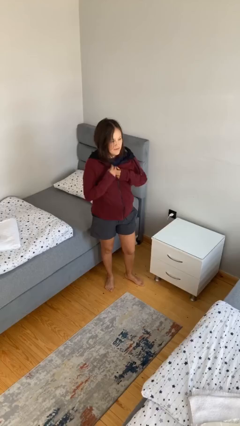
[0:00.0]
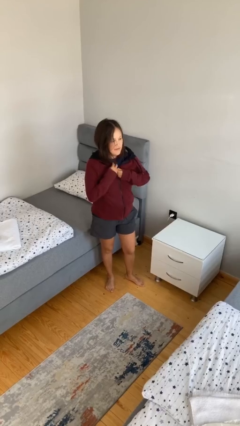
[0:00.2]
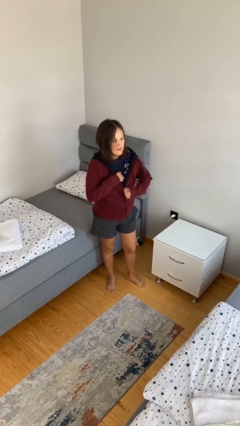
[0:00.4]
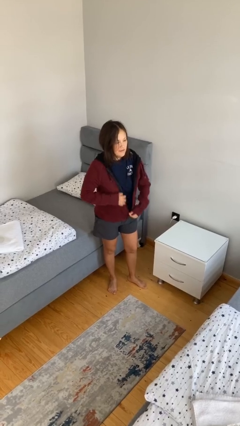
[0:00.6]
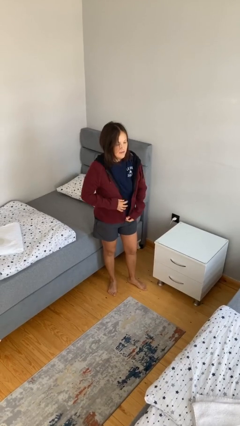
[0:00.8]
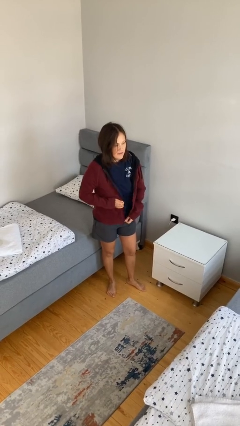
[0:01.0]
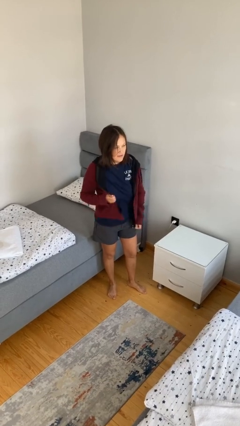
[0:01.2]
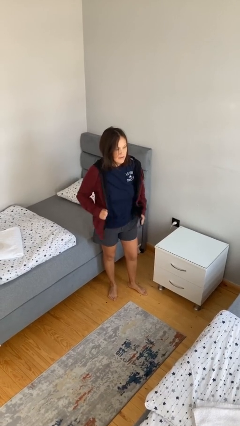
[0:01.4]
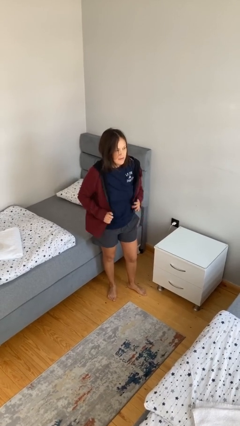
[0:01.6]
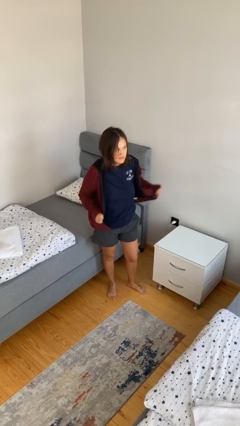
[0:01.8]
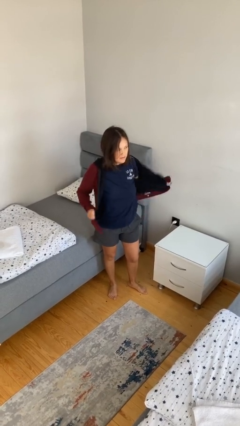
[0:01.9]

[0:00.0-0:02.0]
person unzips jacket

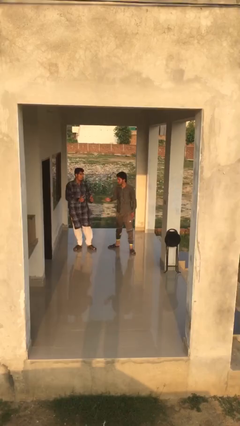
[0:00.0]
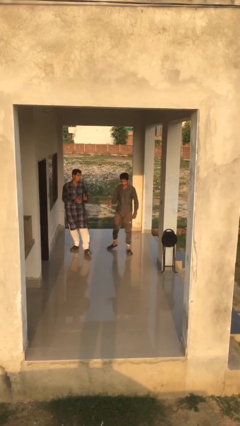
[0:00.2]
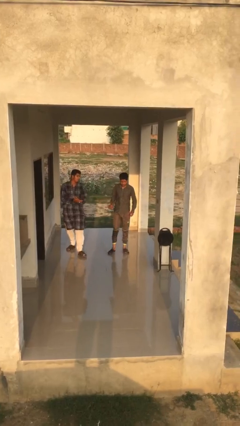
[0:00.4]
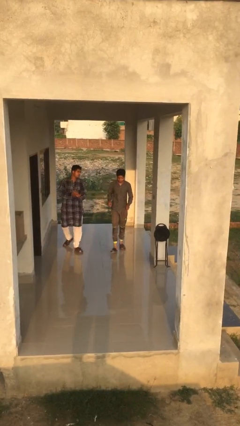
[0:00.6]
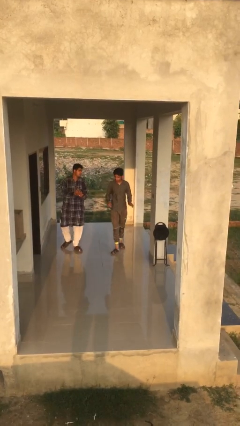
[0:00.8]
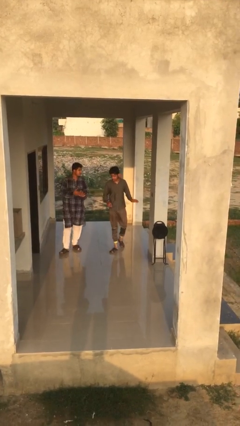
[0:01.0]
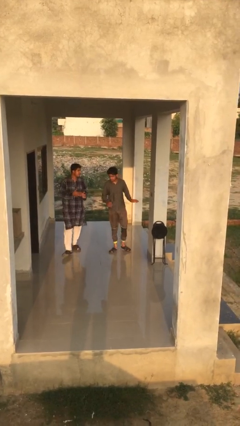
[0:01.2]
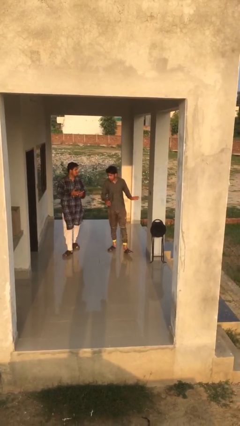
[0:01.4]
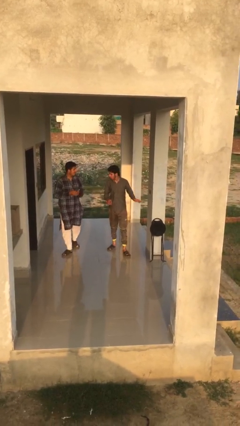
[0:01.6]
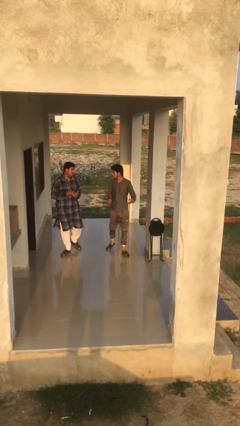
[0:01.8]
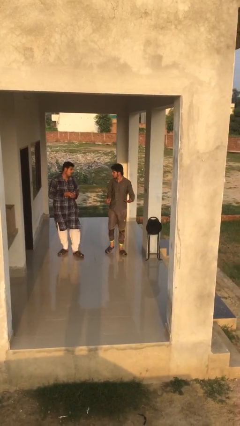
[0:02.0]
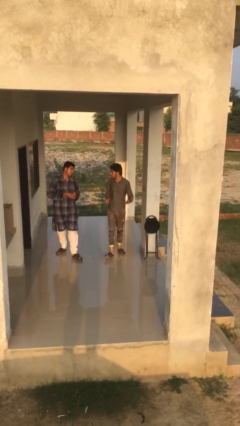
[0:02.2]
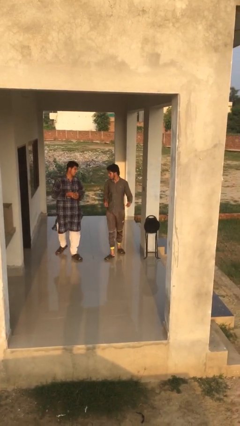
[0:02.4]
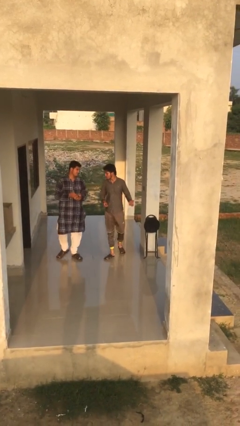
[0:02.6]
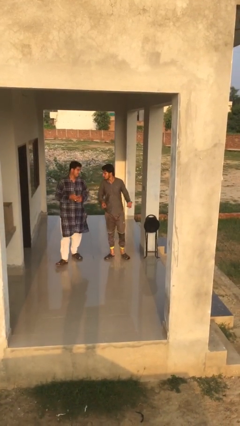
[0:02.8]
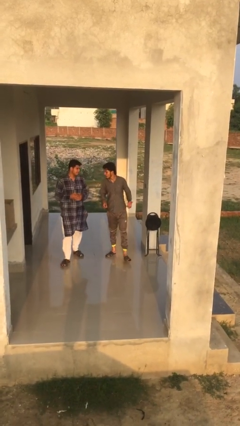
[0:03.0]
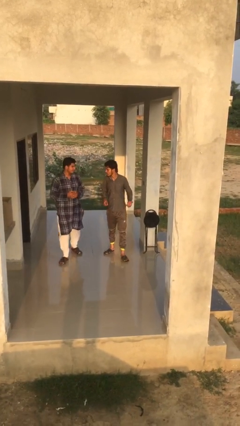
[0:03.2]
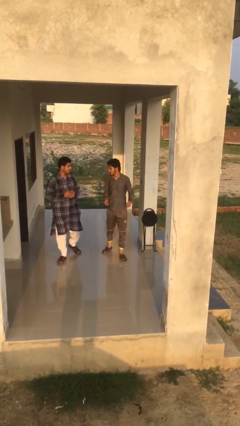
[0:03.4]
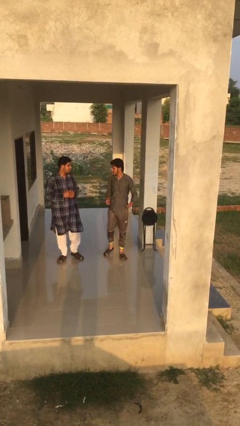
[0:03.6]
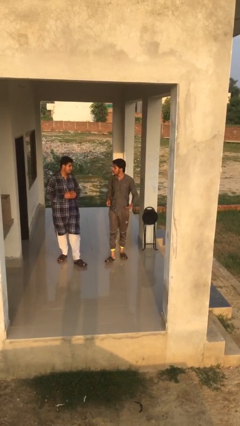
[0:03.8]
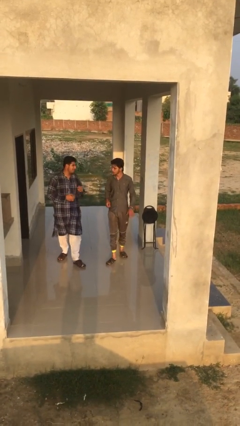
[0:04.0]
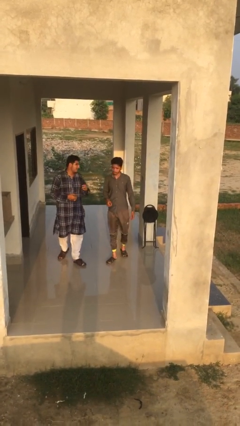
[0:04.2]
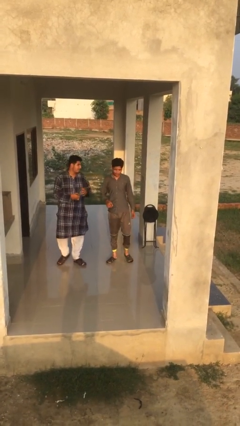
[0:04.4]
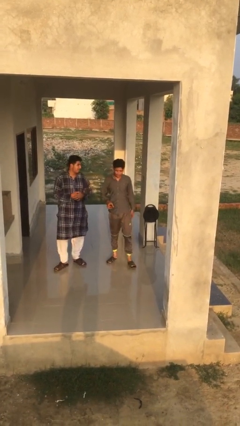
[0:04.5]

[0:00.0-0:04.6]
person talks to person

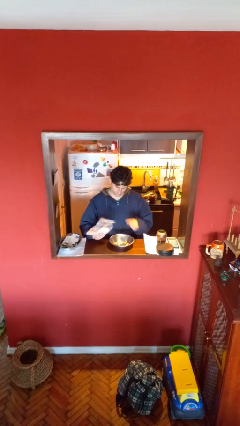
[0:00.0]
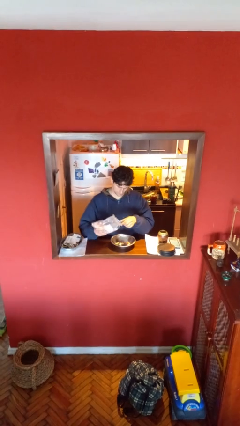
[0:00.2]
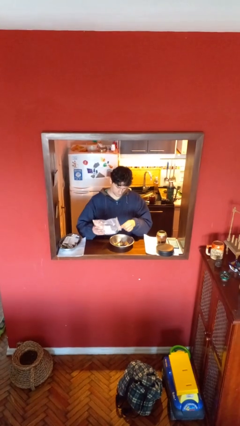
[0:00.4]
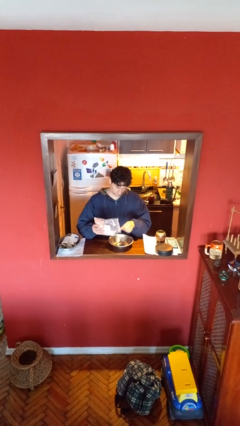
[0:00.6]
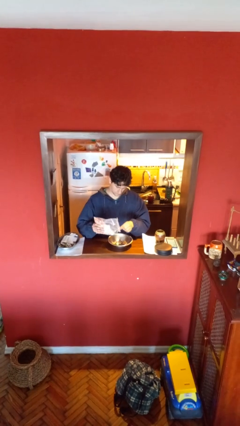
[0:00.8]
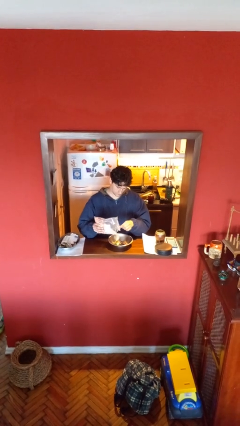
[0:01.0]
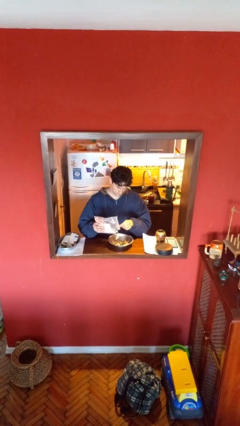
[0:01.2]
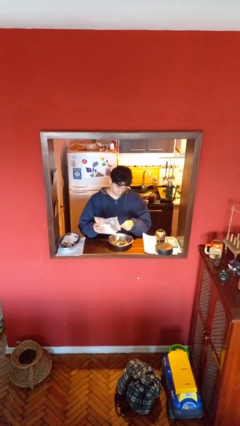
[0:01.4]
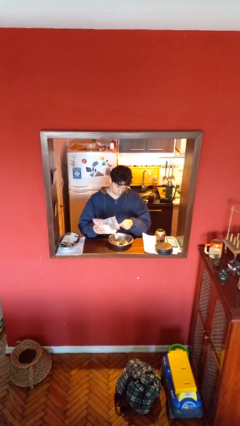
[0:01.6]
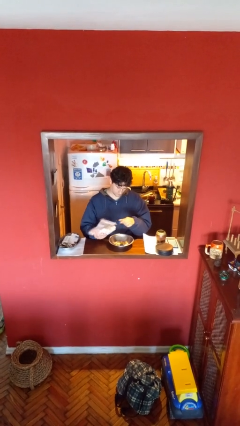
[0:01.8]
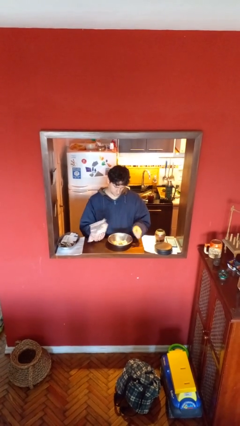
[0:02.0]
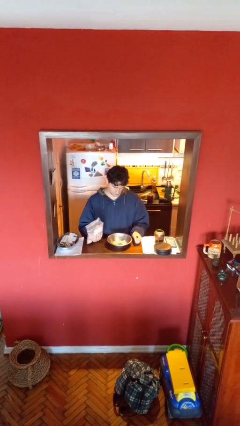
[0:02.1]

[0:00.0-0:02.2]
person pours into bowl

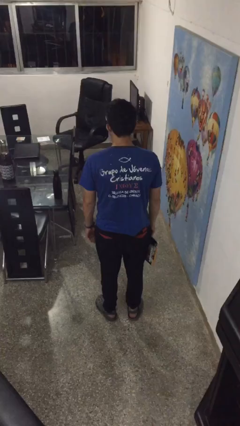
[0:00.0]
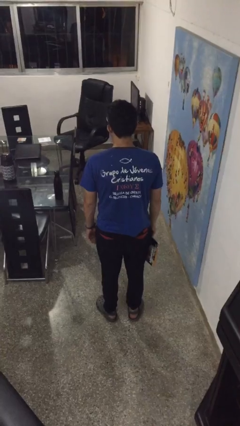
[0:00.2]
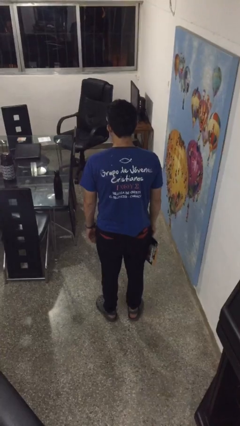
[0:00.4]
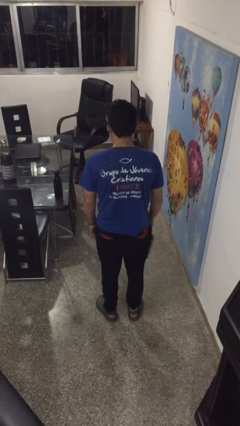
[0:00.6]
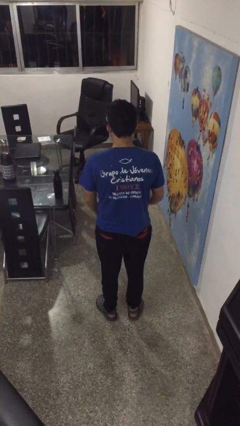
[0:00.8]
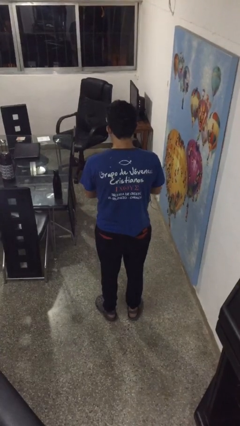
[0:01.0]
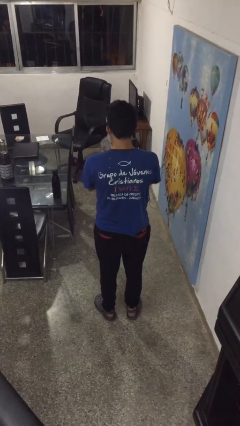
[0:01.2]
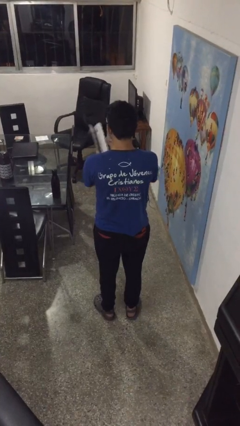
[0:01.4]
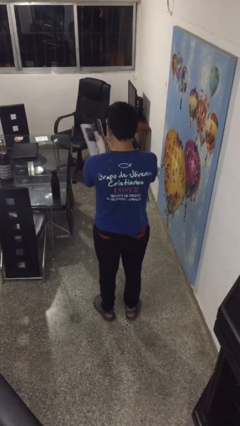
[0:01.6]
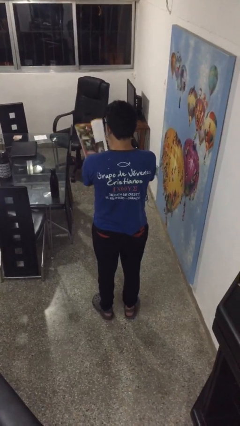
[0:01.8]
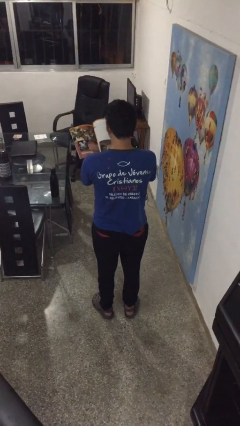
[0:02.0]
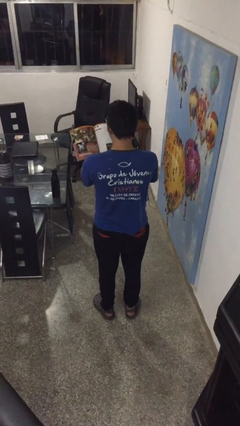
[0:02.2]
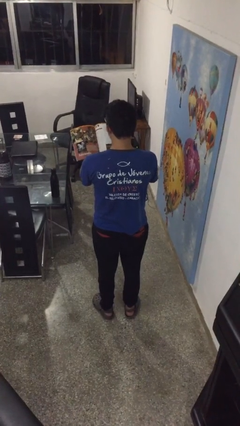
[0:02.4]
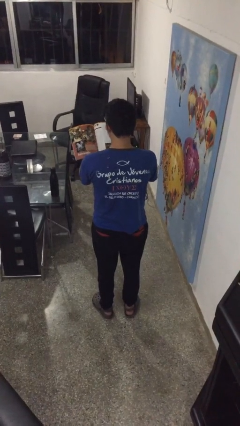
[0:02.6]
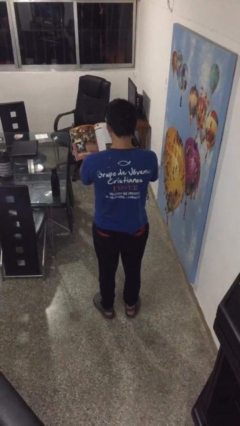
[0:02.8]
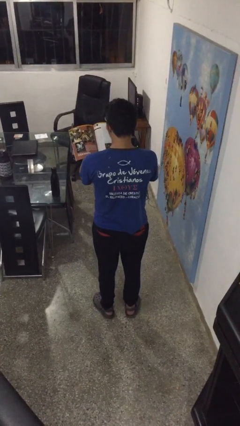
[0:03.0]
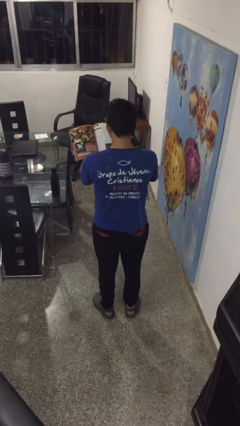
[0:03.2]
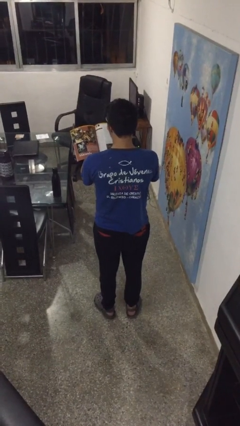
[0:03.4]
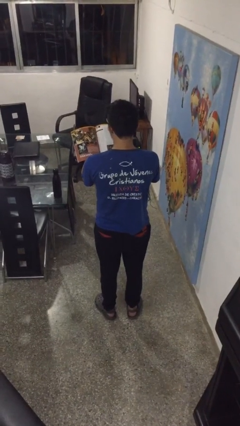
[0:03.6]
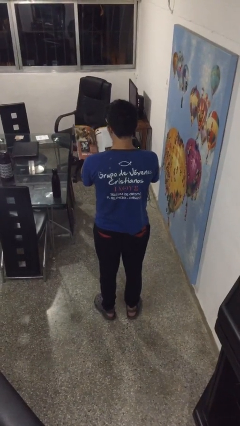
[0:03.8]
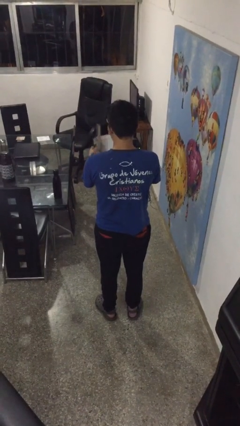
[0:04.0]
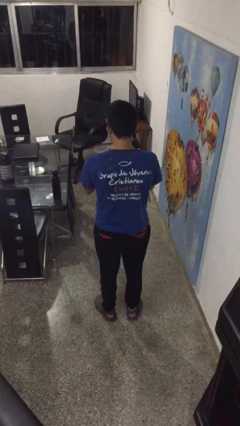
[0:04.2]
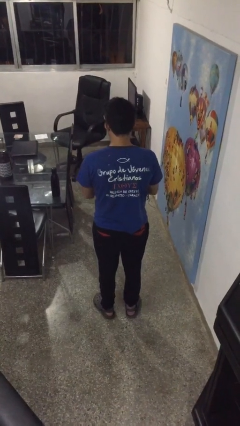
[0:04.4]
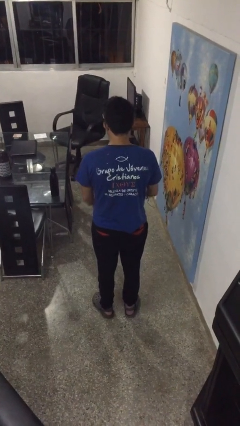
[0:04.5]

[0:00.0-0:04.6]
person reads magazine

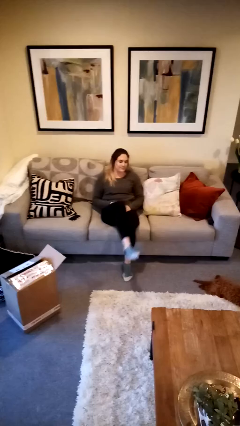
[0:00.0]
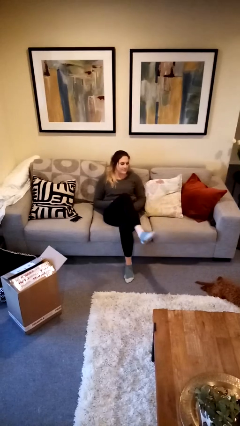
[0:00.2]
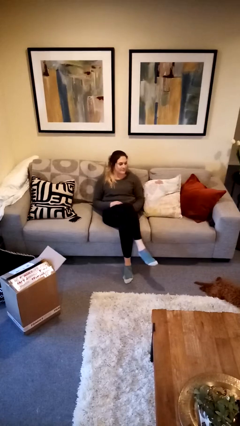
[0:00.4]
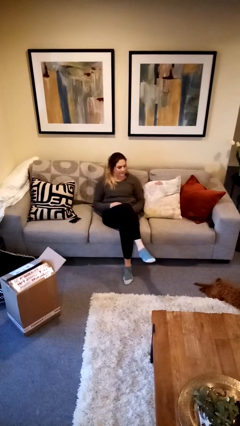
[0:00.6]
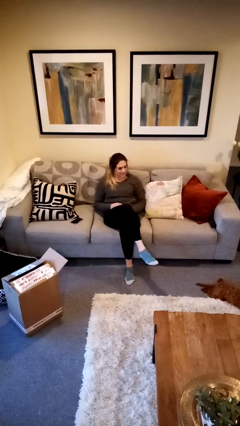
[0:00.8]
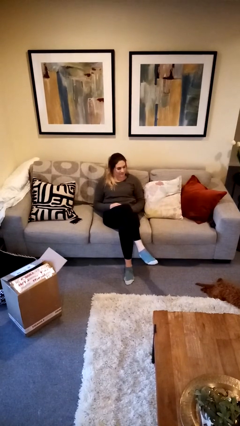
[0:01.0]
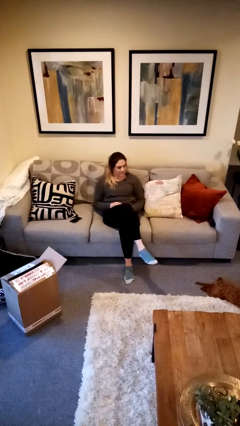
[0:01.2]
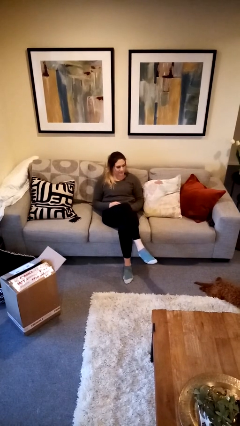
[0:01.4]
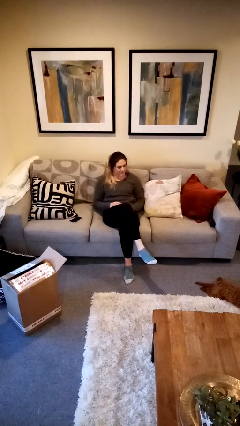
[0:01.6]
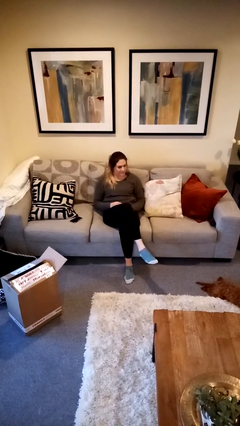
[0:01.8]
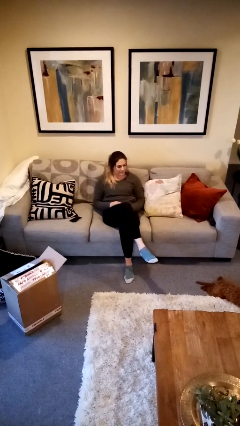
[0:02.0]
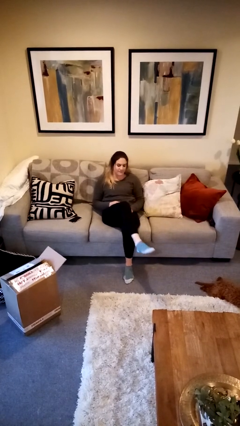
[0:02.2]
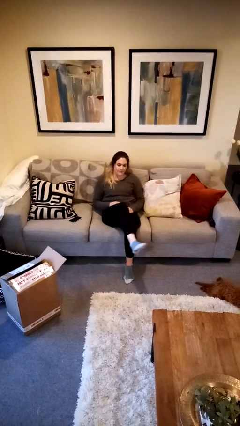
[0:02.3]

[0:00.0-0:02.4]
person crosses legs

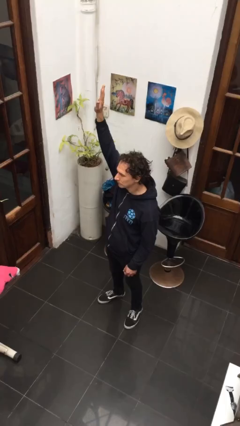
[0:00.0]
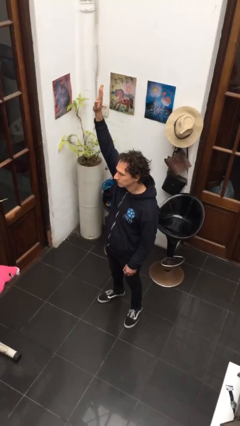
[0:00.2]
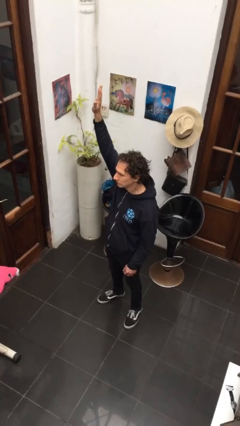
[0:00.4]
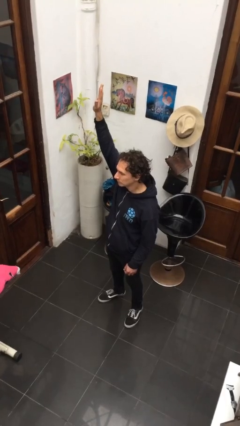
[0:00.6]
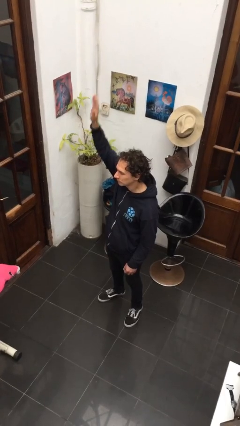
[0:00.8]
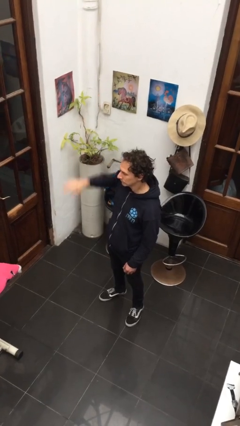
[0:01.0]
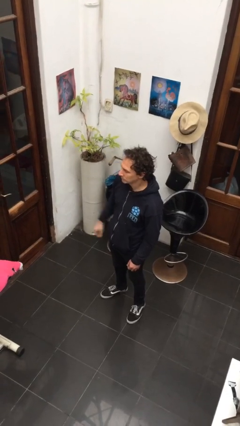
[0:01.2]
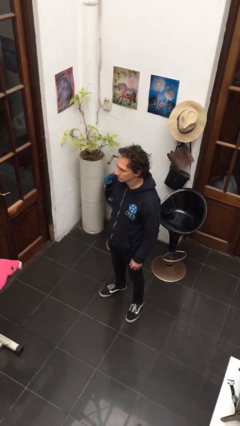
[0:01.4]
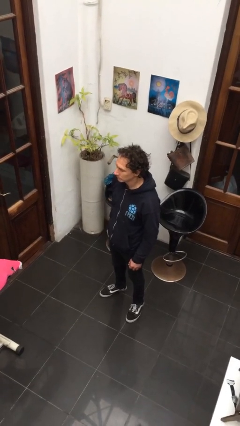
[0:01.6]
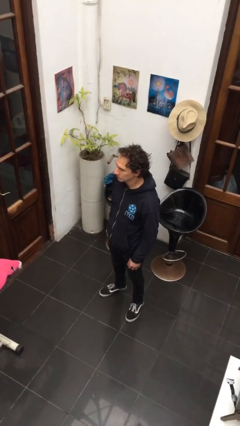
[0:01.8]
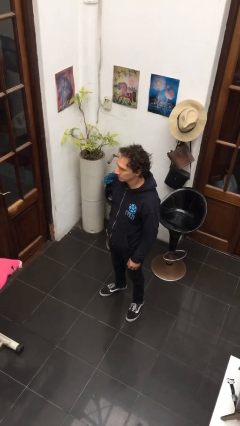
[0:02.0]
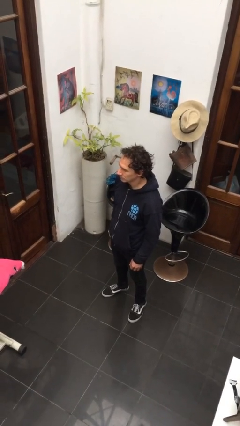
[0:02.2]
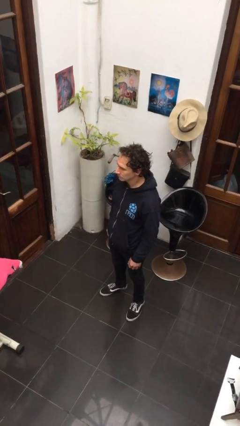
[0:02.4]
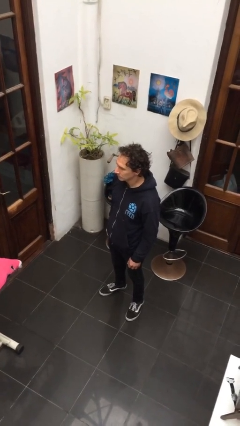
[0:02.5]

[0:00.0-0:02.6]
person gestures lower hand
